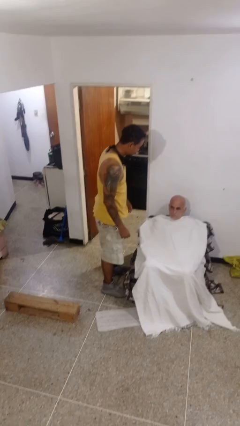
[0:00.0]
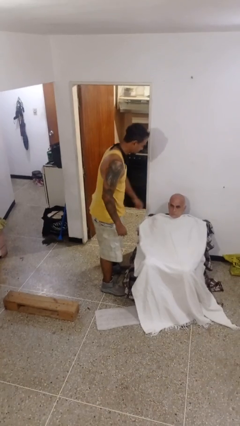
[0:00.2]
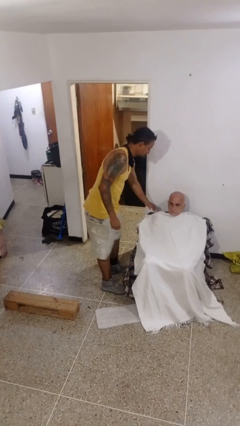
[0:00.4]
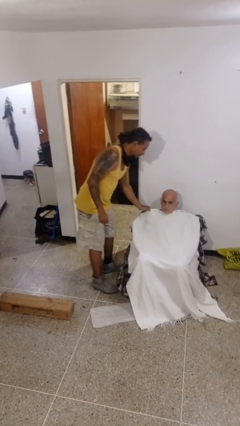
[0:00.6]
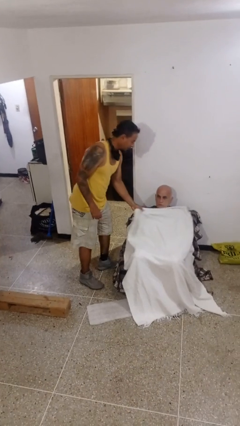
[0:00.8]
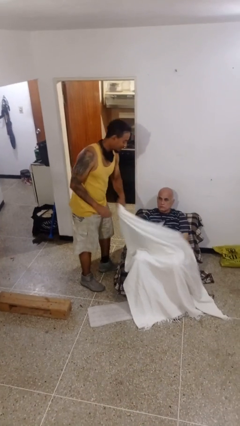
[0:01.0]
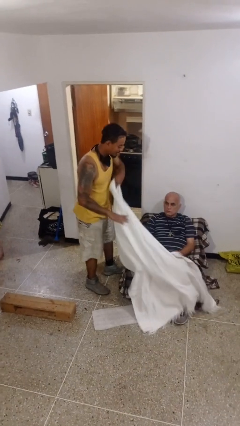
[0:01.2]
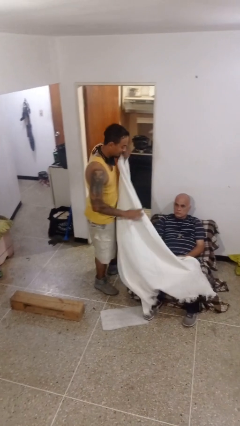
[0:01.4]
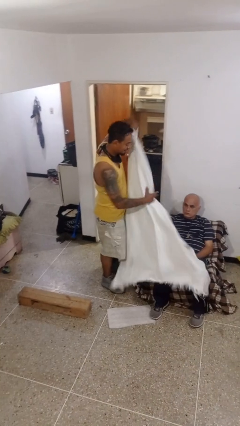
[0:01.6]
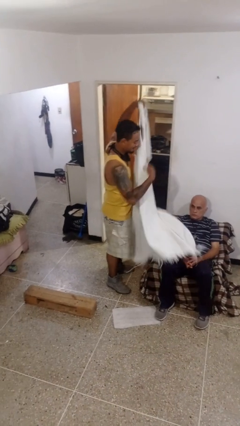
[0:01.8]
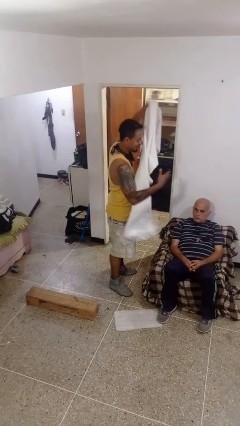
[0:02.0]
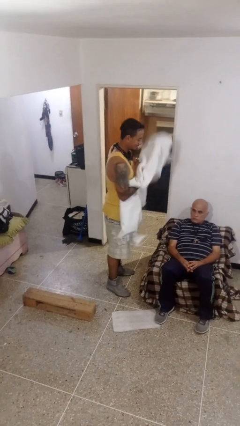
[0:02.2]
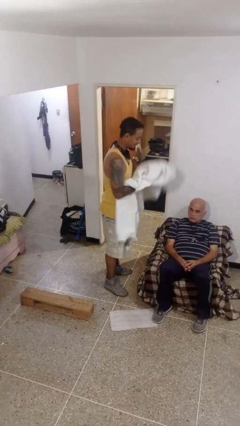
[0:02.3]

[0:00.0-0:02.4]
person uncovers friend with blanket

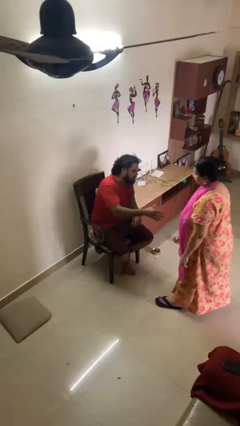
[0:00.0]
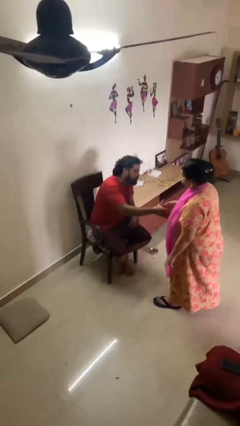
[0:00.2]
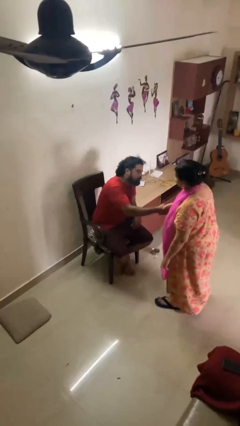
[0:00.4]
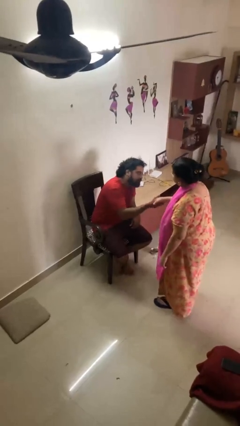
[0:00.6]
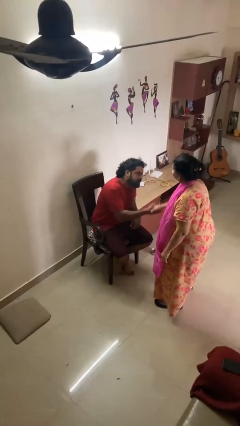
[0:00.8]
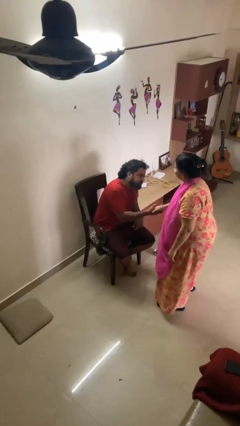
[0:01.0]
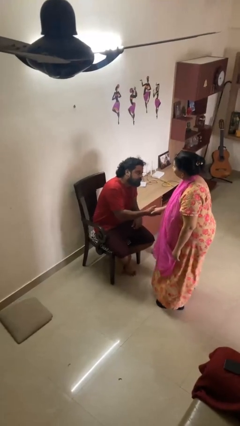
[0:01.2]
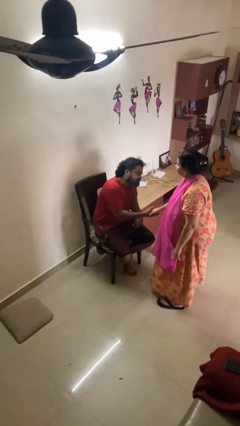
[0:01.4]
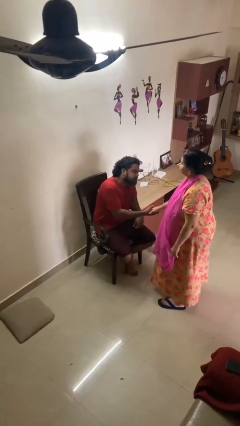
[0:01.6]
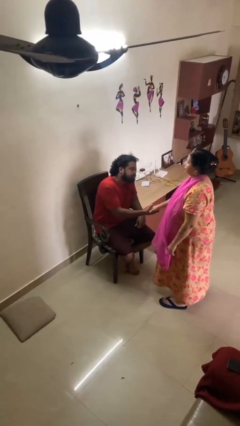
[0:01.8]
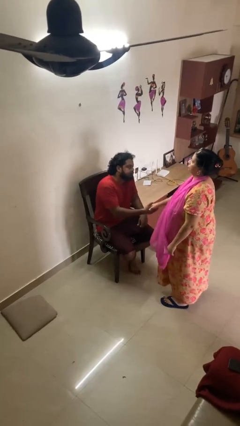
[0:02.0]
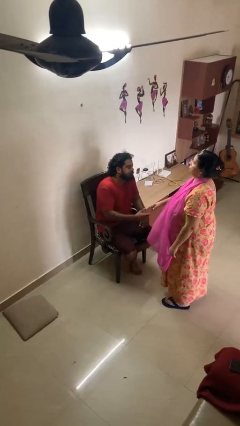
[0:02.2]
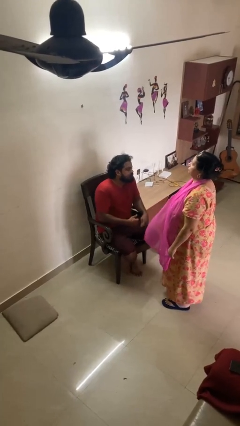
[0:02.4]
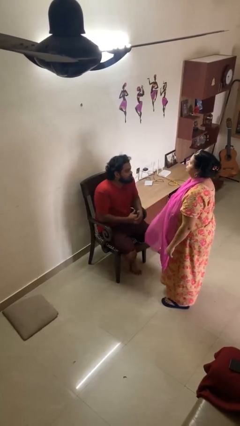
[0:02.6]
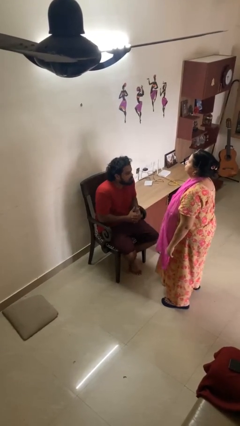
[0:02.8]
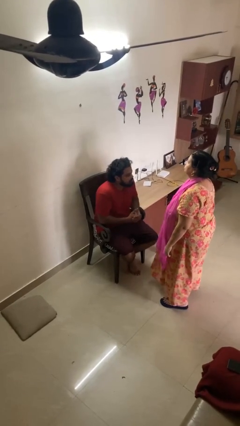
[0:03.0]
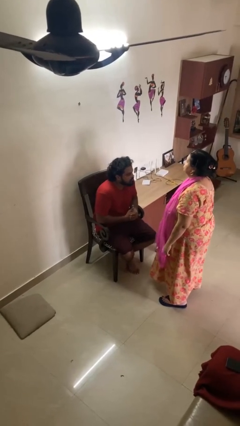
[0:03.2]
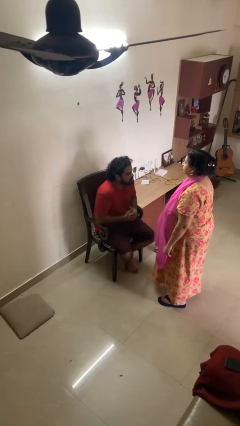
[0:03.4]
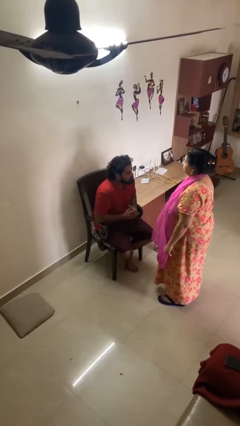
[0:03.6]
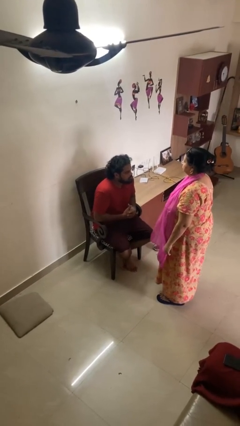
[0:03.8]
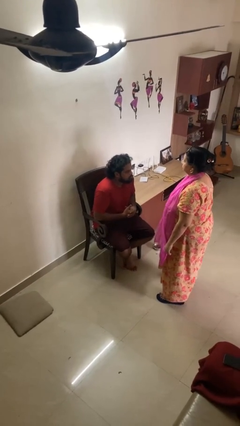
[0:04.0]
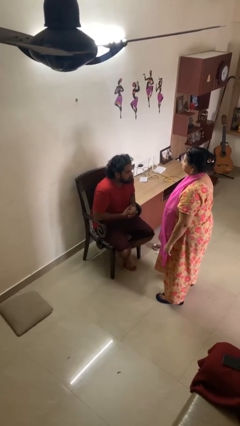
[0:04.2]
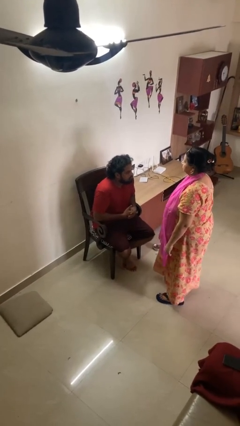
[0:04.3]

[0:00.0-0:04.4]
person shakes hand

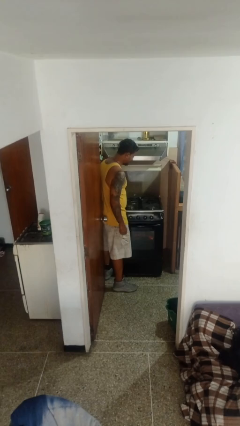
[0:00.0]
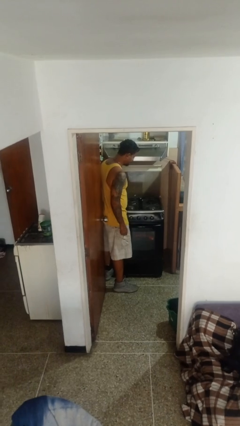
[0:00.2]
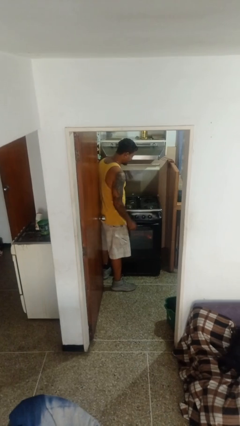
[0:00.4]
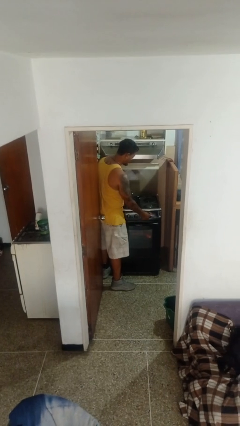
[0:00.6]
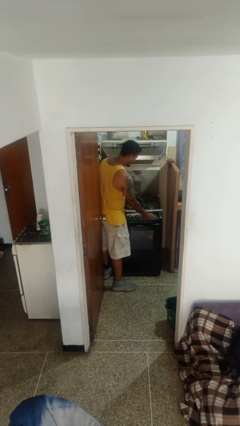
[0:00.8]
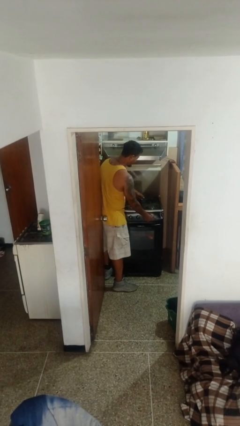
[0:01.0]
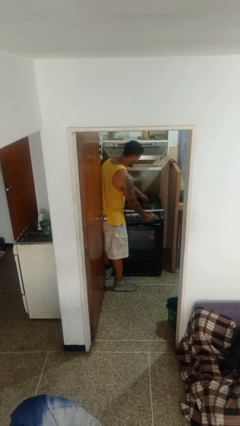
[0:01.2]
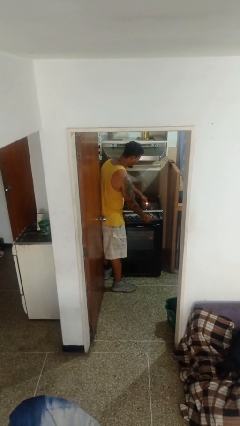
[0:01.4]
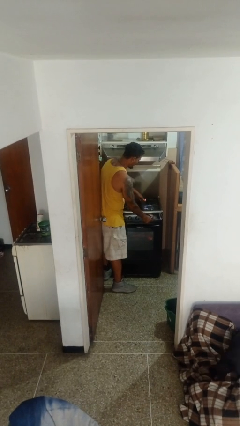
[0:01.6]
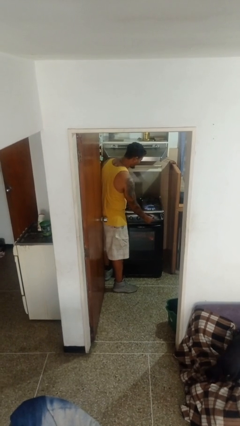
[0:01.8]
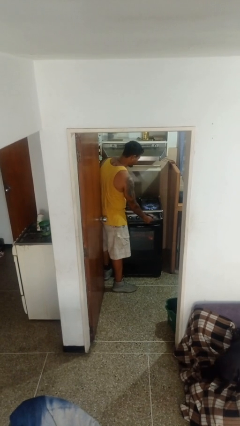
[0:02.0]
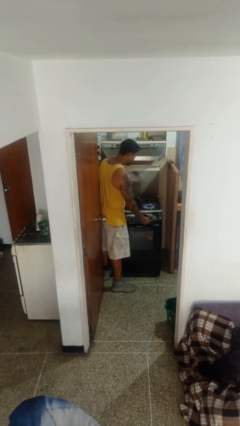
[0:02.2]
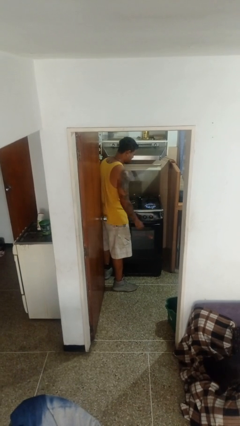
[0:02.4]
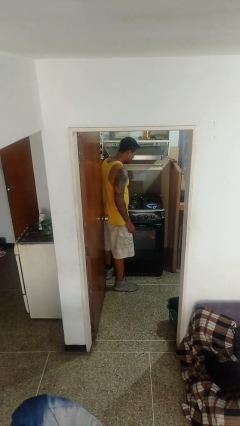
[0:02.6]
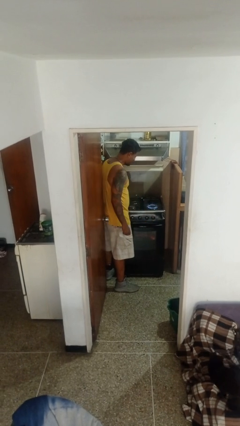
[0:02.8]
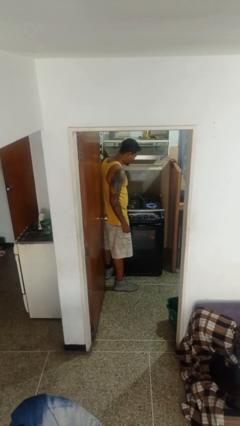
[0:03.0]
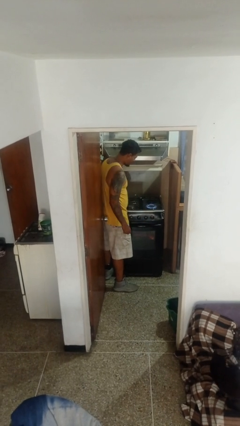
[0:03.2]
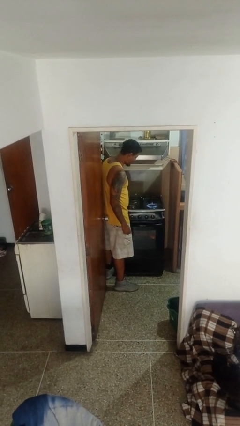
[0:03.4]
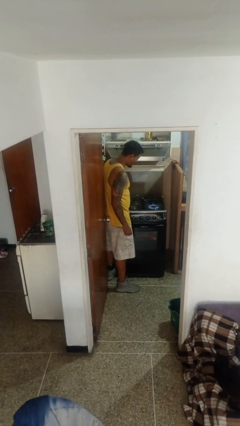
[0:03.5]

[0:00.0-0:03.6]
person turns on stovetop

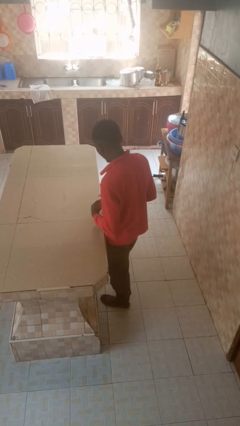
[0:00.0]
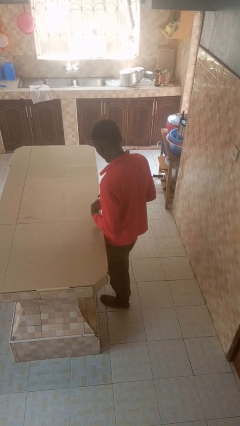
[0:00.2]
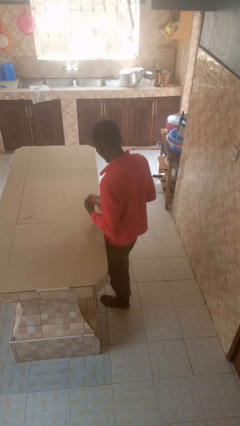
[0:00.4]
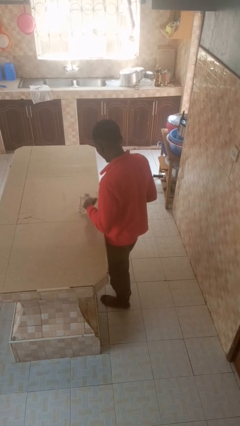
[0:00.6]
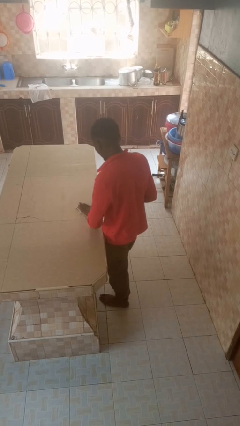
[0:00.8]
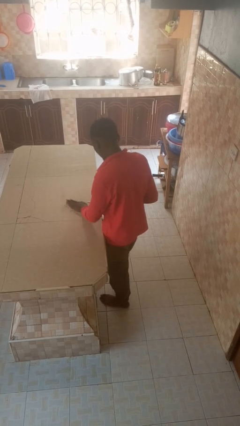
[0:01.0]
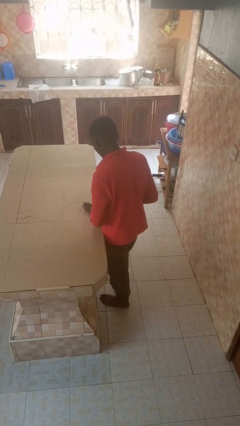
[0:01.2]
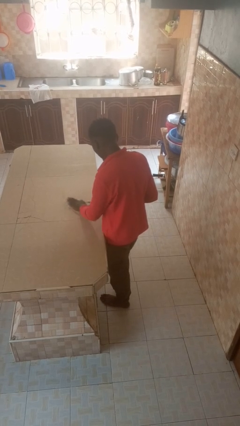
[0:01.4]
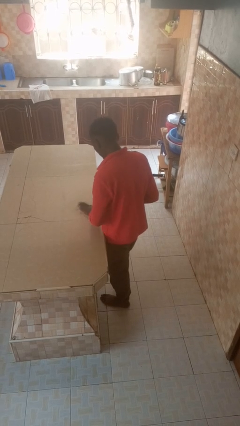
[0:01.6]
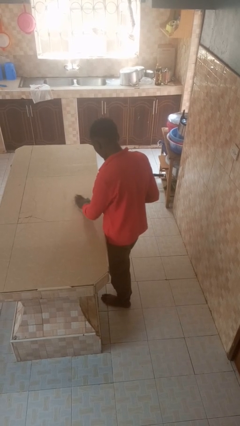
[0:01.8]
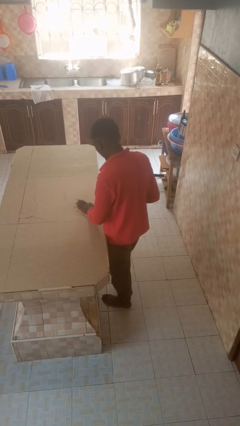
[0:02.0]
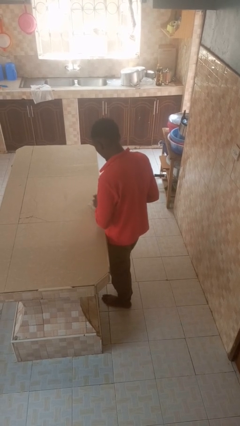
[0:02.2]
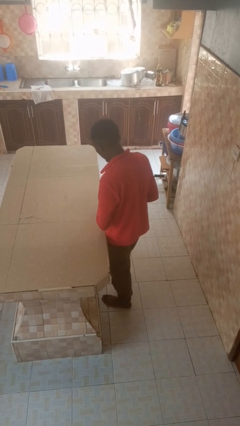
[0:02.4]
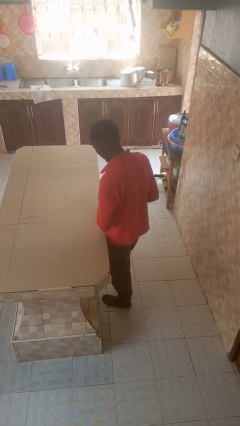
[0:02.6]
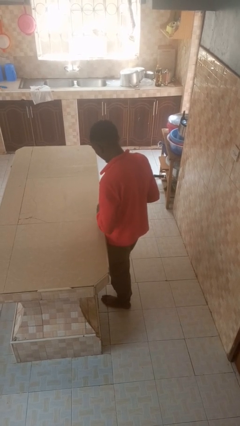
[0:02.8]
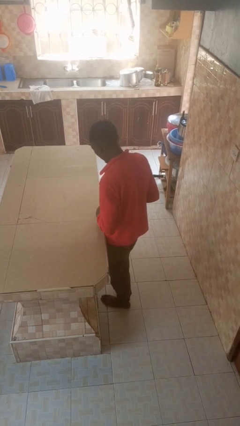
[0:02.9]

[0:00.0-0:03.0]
person cleans table with rag

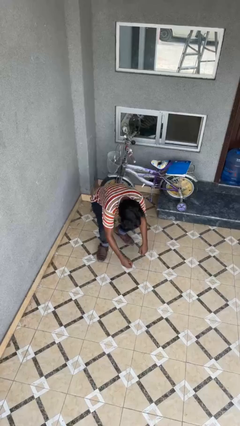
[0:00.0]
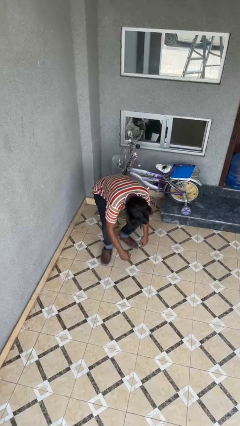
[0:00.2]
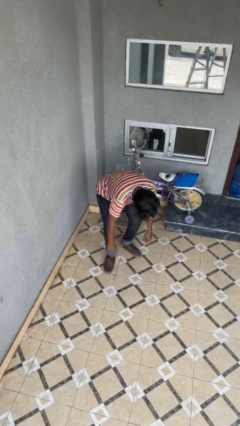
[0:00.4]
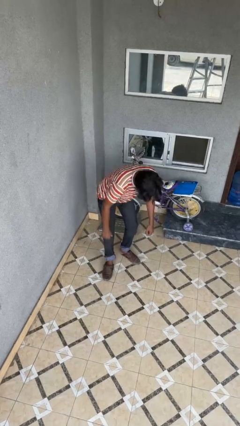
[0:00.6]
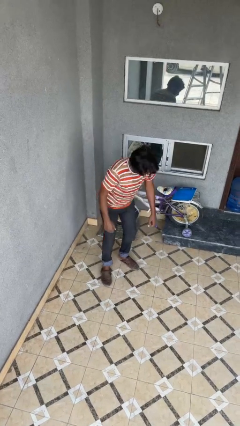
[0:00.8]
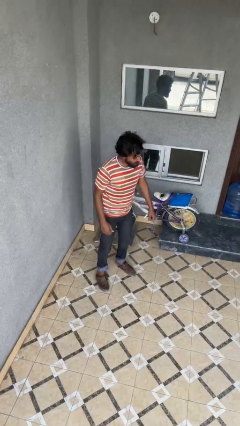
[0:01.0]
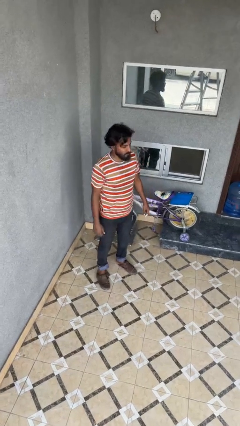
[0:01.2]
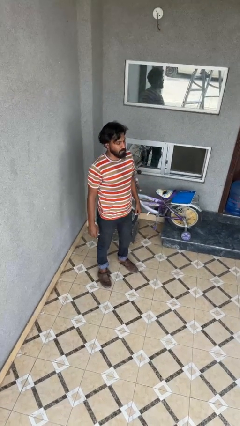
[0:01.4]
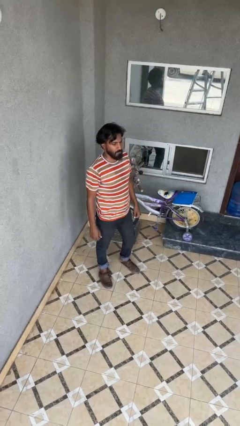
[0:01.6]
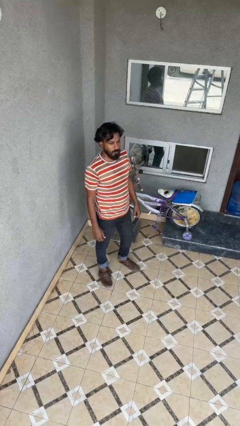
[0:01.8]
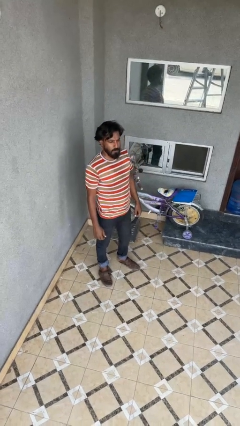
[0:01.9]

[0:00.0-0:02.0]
person stands up

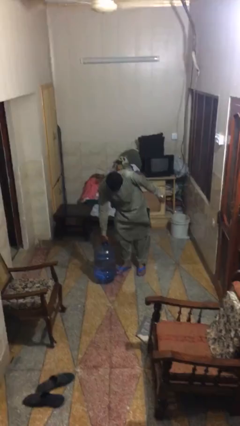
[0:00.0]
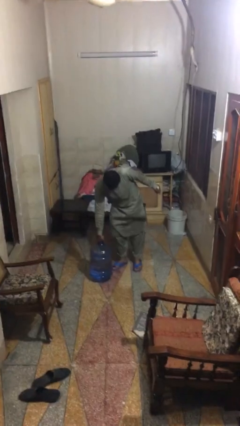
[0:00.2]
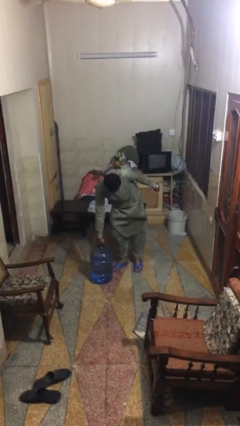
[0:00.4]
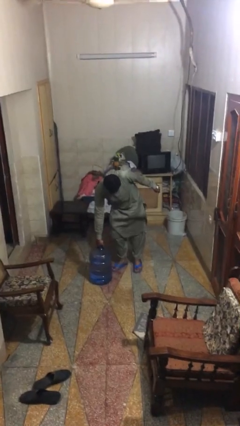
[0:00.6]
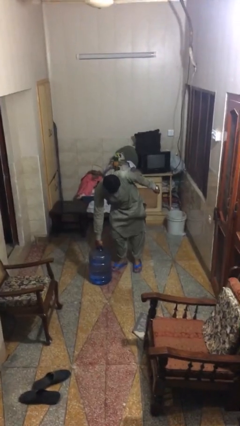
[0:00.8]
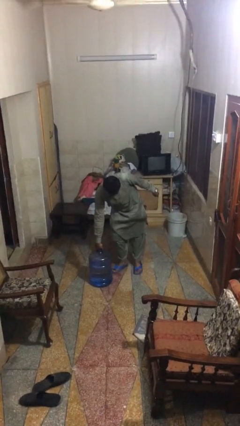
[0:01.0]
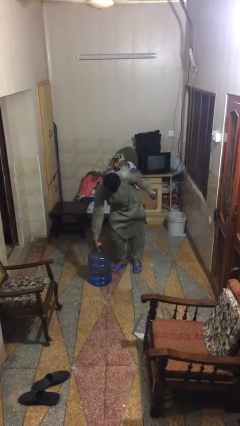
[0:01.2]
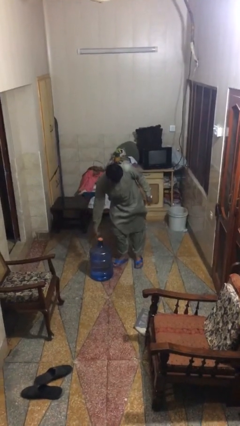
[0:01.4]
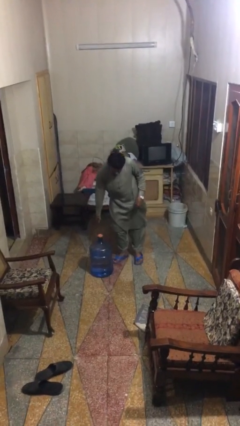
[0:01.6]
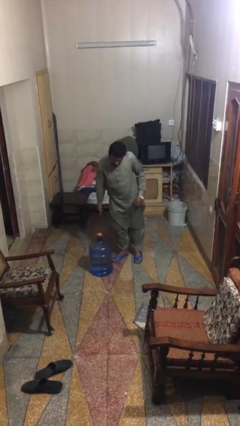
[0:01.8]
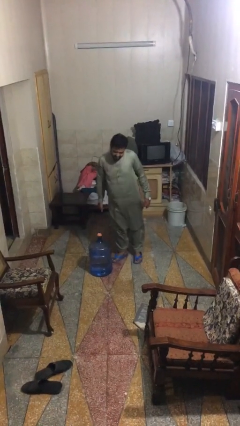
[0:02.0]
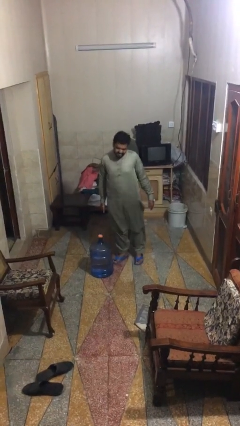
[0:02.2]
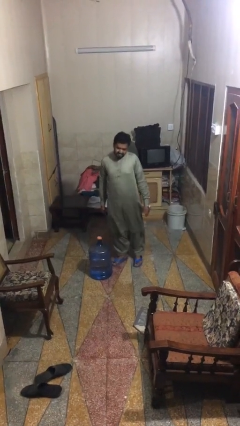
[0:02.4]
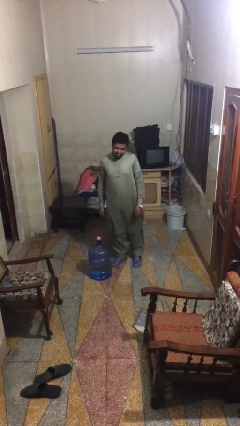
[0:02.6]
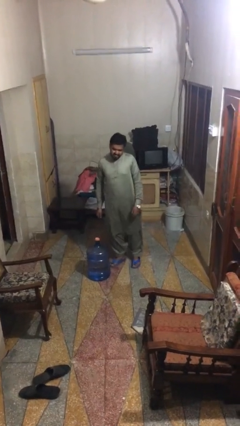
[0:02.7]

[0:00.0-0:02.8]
person puts down object on floor
